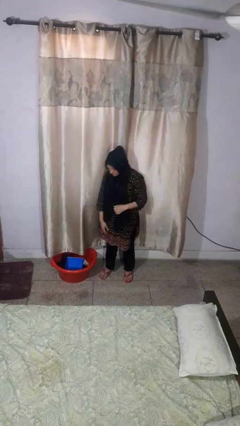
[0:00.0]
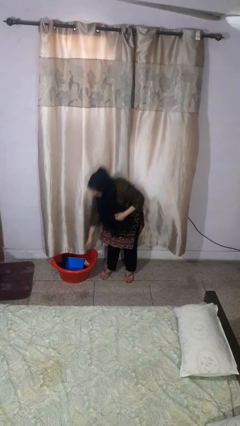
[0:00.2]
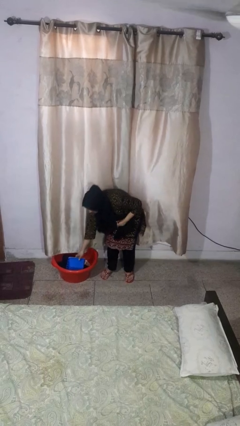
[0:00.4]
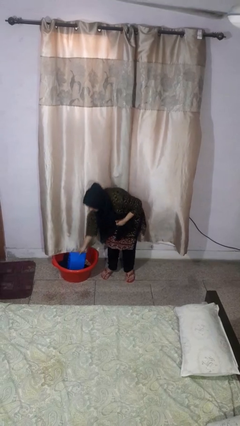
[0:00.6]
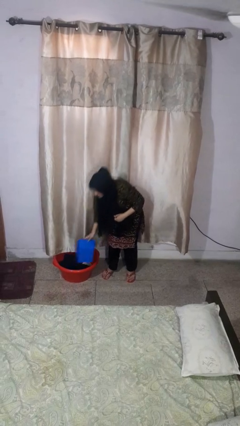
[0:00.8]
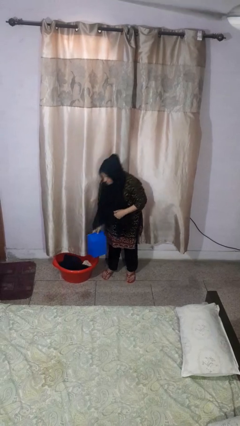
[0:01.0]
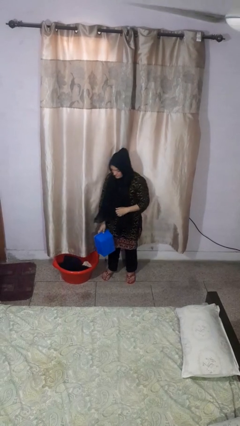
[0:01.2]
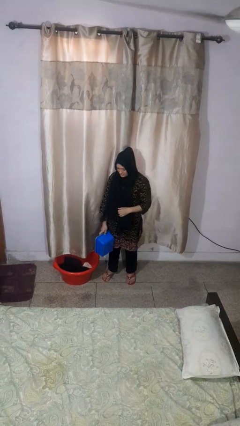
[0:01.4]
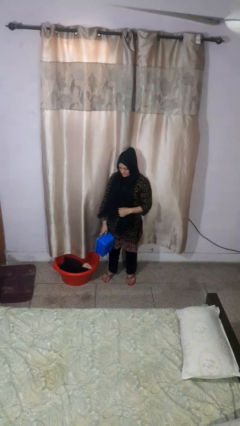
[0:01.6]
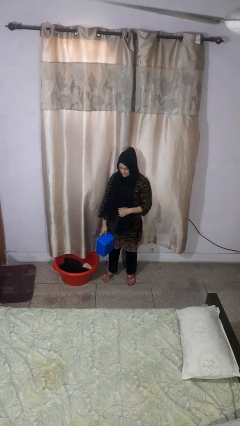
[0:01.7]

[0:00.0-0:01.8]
person takes object from basket

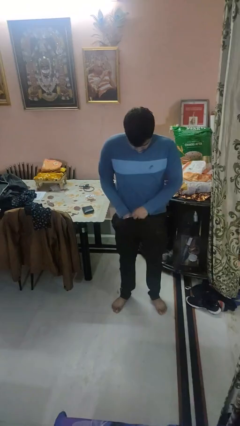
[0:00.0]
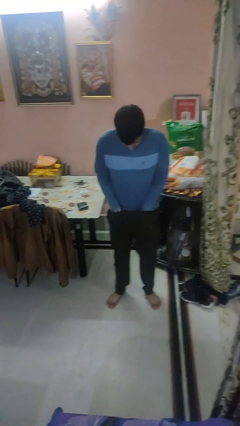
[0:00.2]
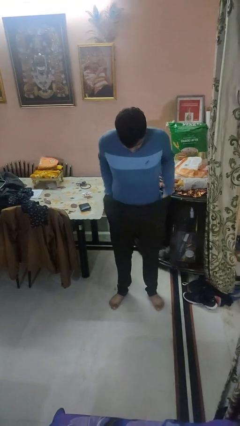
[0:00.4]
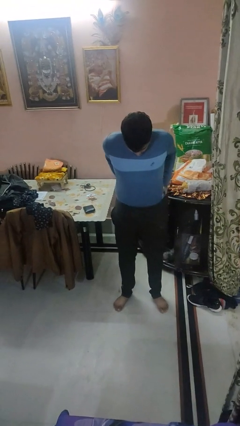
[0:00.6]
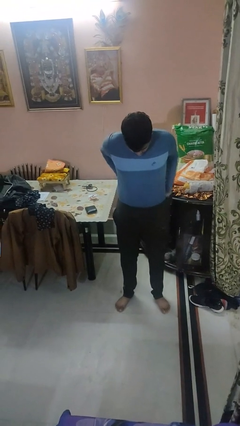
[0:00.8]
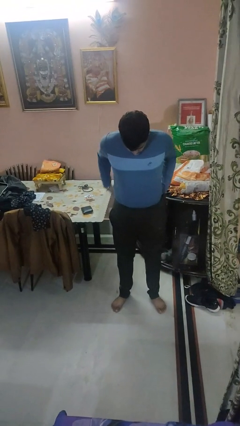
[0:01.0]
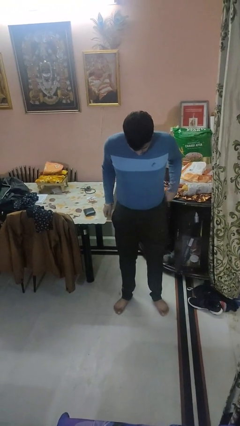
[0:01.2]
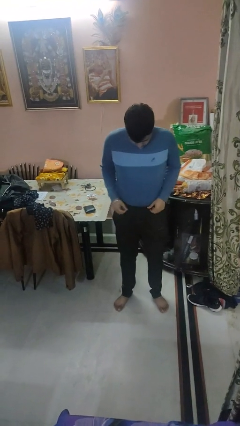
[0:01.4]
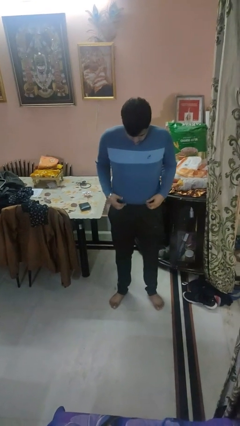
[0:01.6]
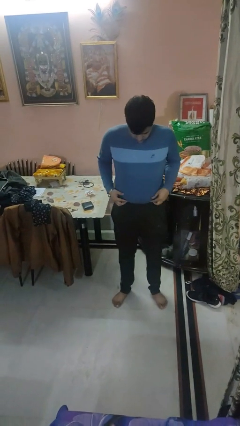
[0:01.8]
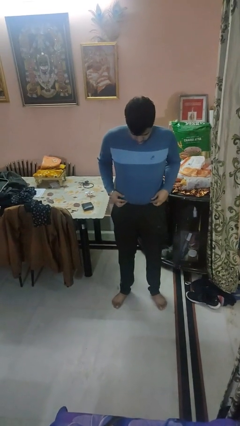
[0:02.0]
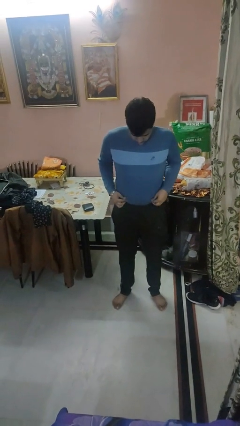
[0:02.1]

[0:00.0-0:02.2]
person tucks in shirt

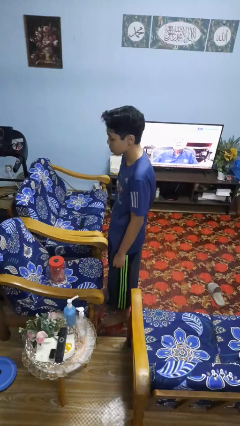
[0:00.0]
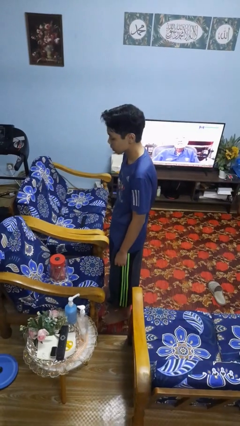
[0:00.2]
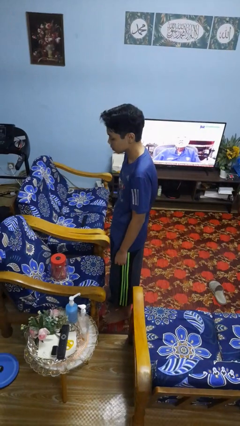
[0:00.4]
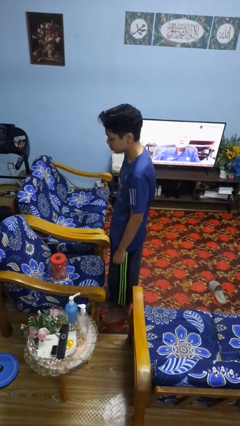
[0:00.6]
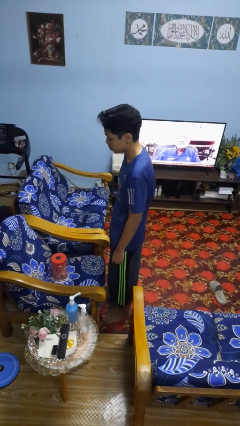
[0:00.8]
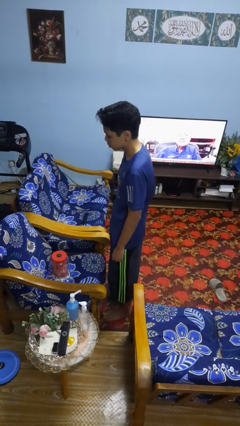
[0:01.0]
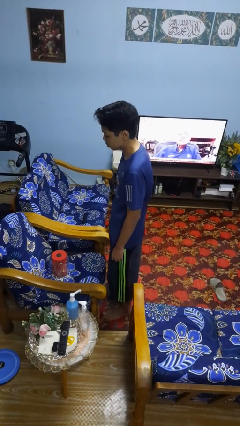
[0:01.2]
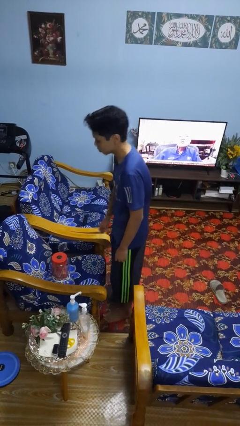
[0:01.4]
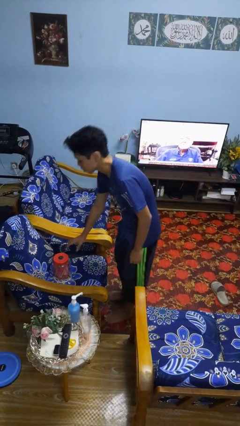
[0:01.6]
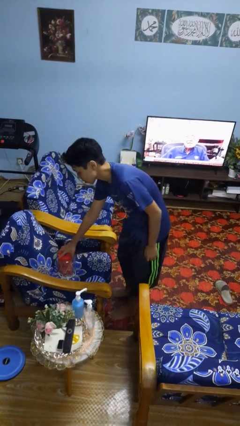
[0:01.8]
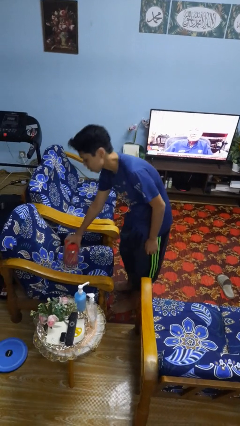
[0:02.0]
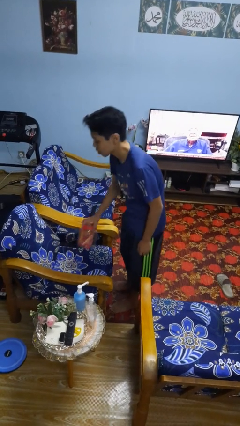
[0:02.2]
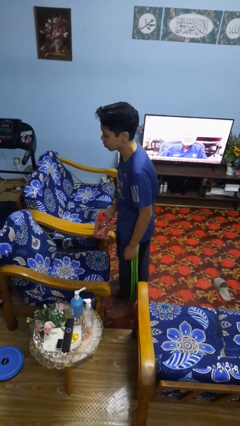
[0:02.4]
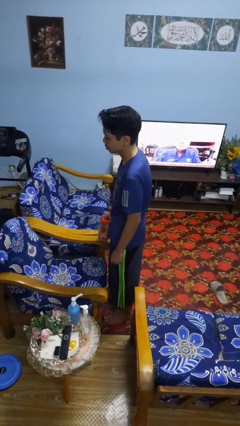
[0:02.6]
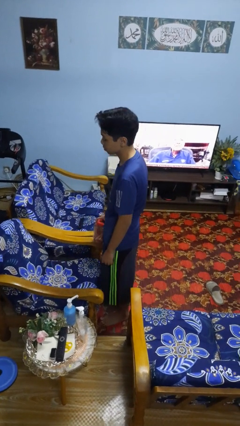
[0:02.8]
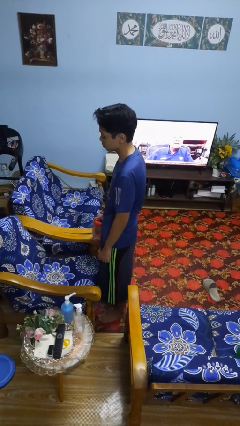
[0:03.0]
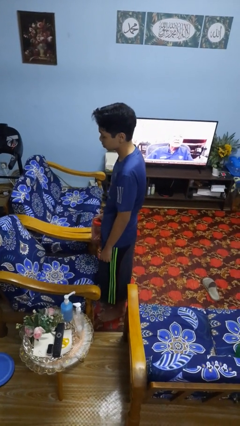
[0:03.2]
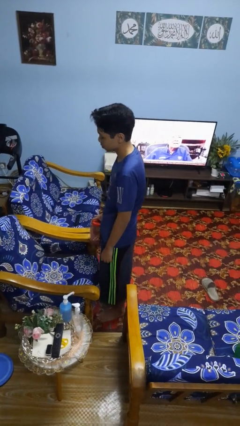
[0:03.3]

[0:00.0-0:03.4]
person picks up object from couch

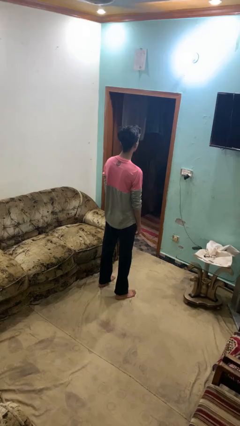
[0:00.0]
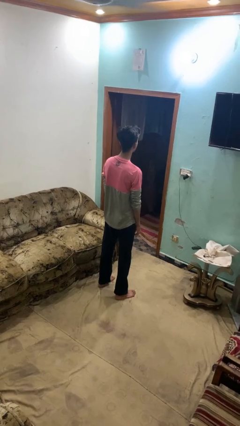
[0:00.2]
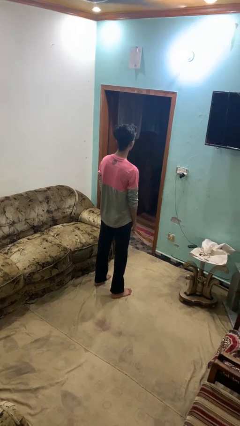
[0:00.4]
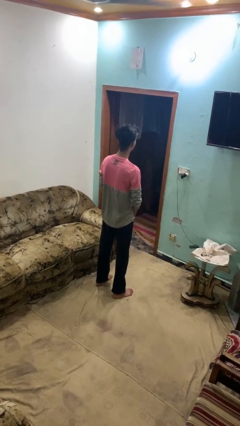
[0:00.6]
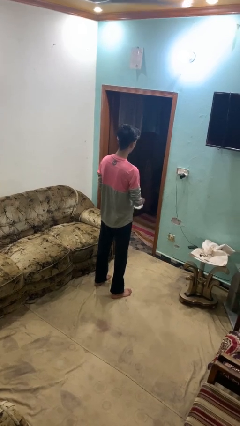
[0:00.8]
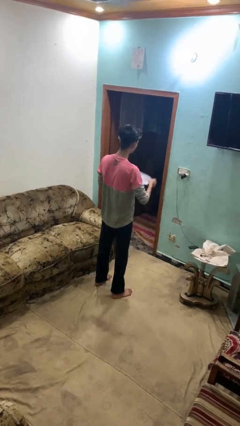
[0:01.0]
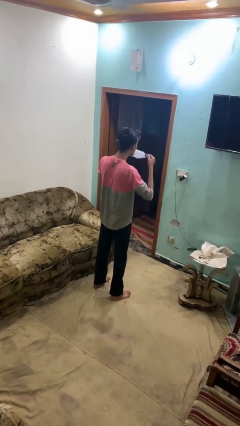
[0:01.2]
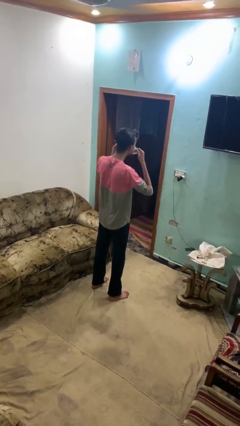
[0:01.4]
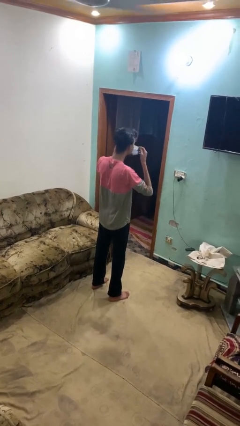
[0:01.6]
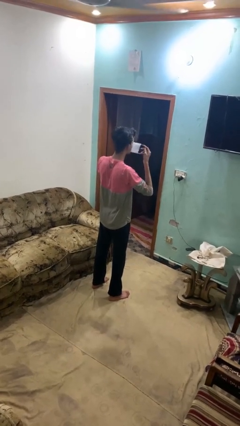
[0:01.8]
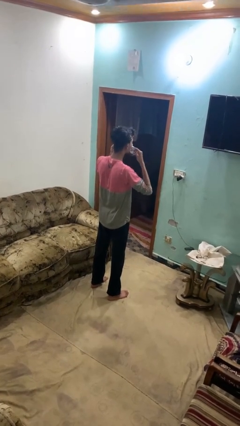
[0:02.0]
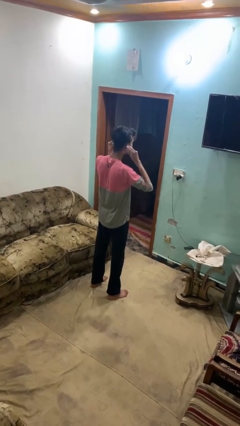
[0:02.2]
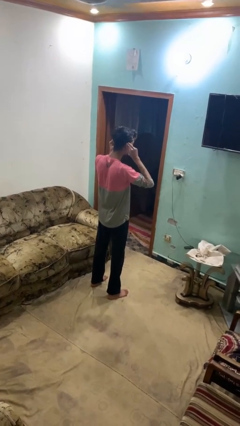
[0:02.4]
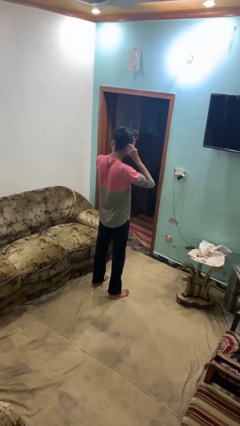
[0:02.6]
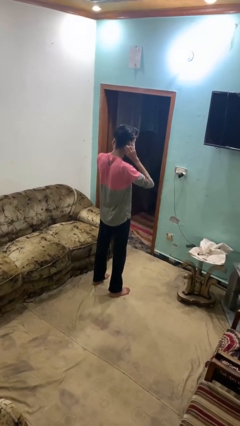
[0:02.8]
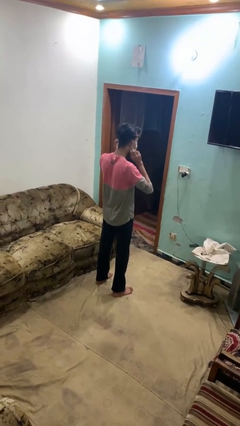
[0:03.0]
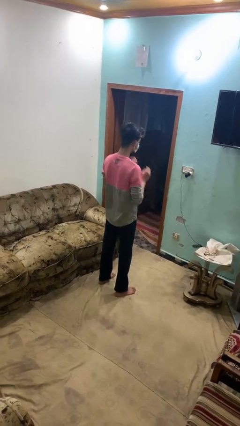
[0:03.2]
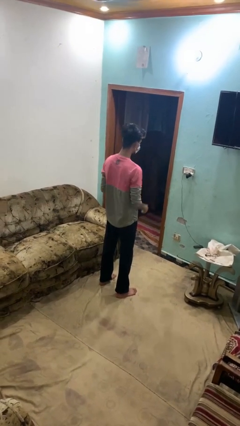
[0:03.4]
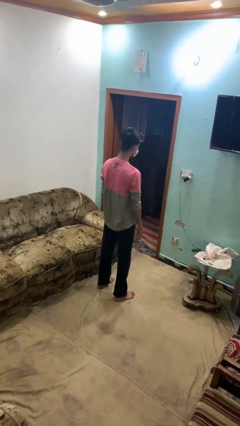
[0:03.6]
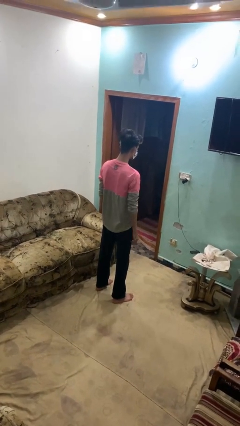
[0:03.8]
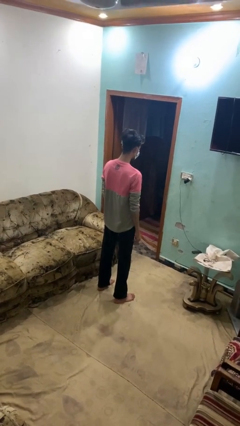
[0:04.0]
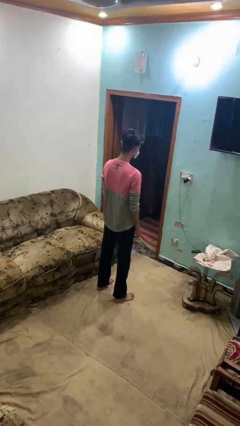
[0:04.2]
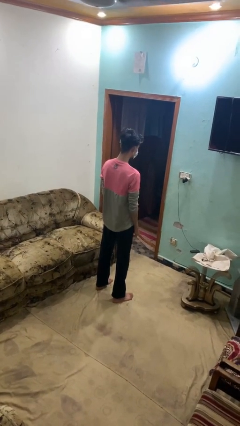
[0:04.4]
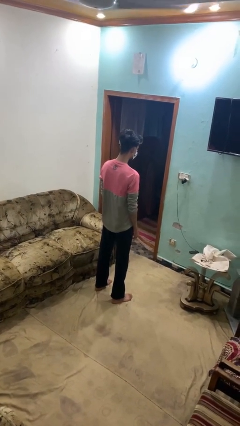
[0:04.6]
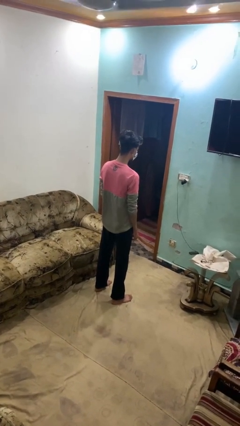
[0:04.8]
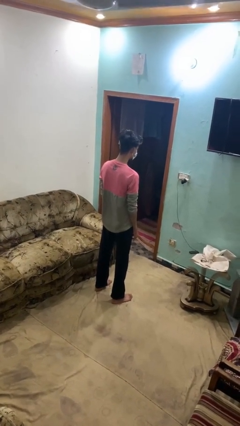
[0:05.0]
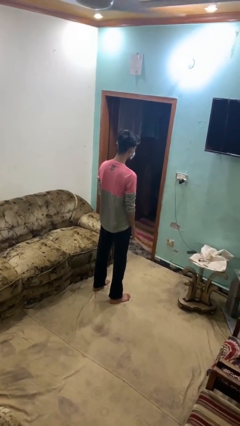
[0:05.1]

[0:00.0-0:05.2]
person puts on facemask

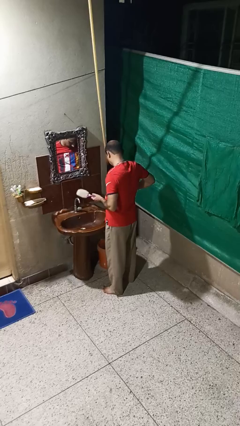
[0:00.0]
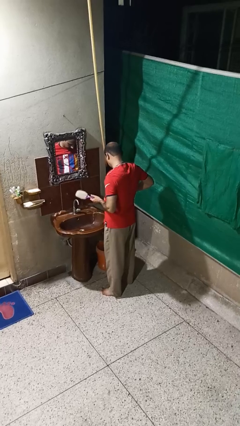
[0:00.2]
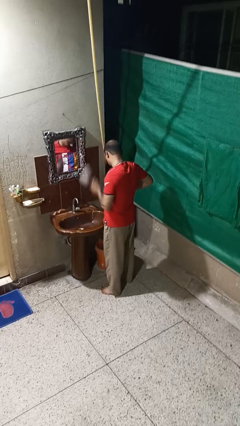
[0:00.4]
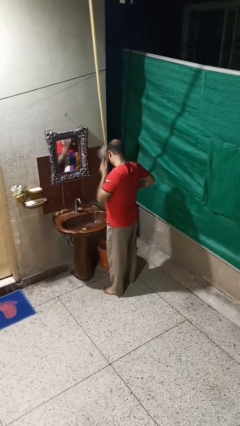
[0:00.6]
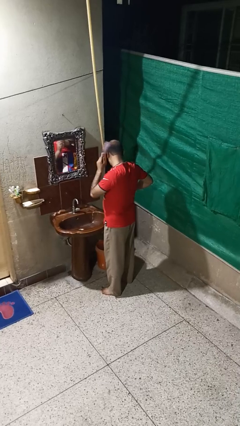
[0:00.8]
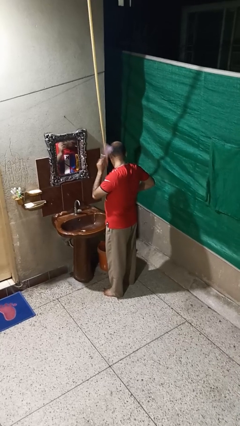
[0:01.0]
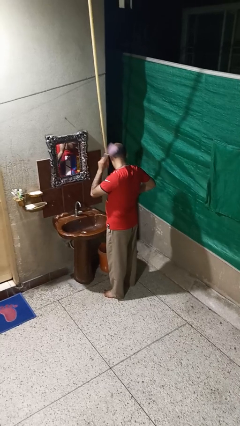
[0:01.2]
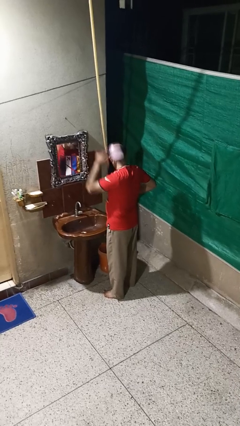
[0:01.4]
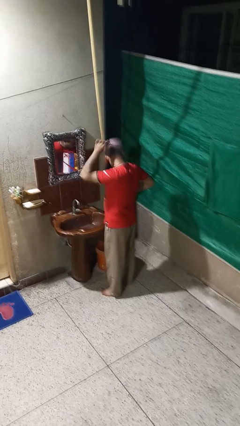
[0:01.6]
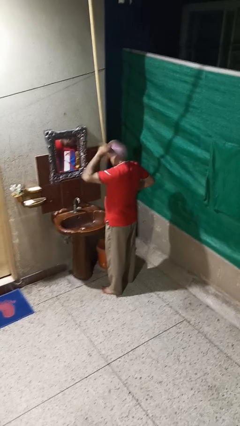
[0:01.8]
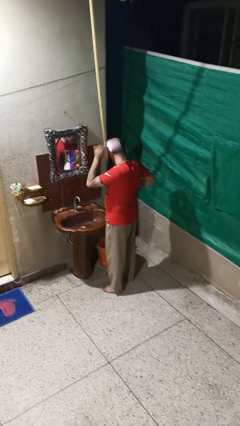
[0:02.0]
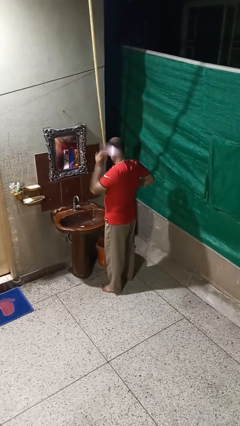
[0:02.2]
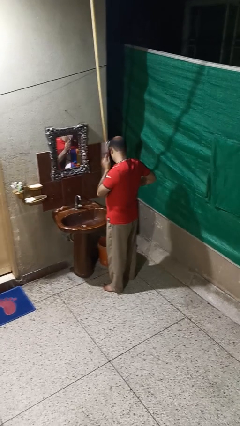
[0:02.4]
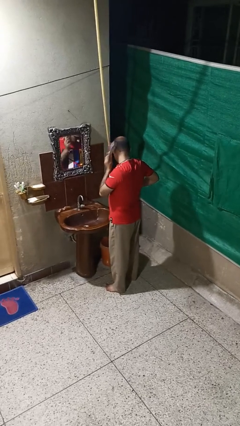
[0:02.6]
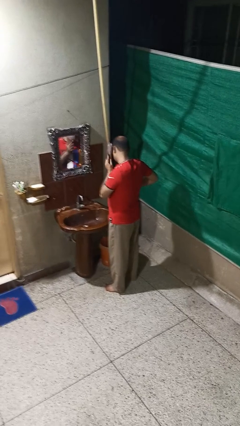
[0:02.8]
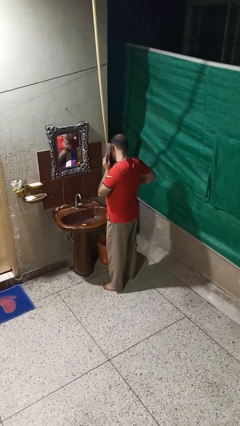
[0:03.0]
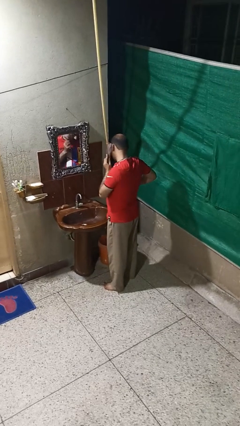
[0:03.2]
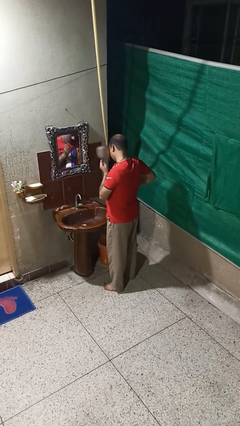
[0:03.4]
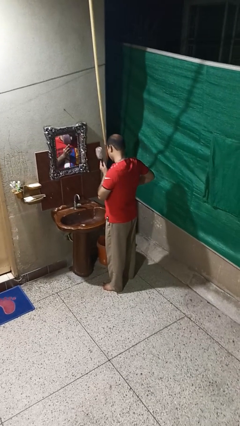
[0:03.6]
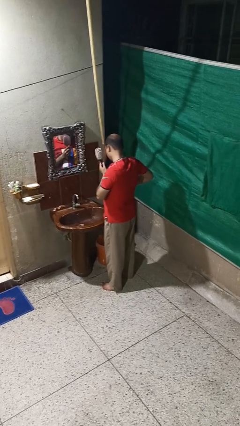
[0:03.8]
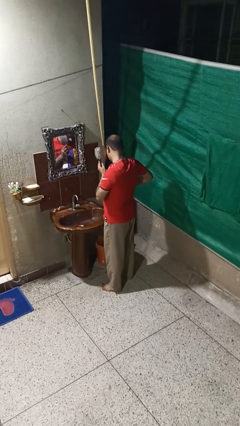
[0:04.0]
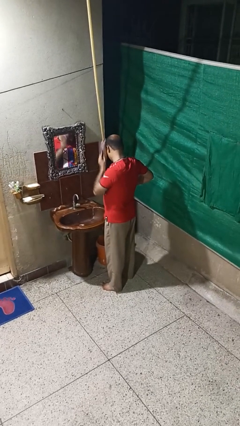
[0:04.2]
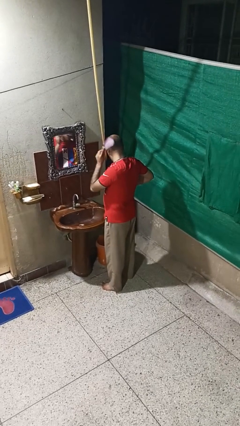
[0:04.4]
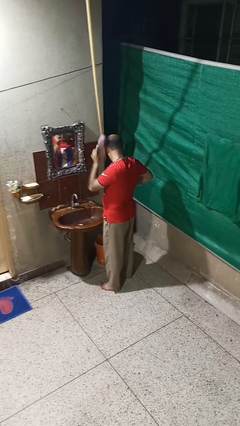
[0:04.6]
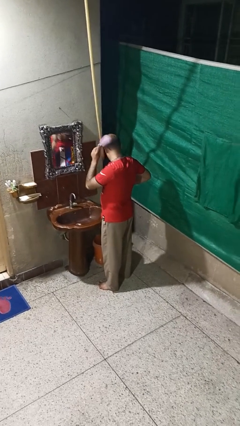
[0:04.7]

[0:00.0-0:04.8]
person brushes hair

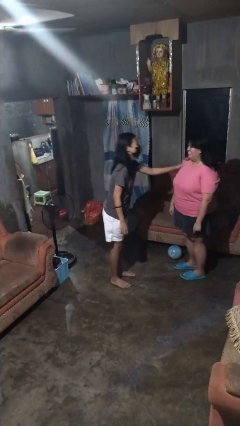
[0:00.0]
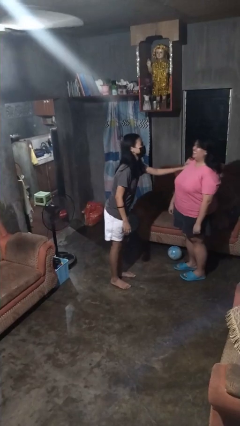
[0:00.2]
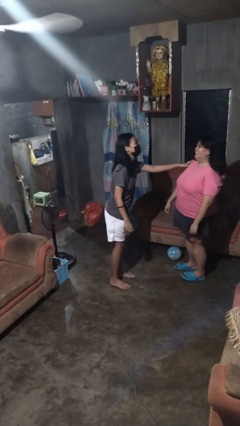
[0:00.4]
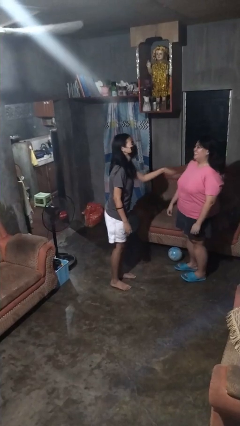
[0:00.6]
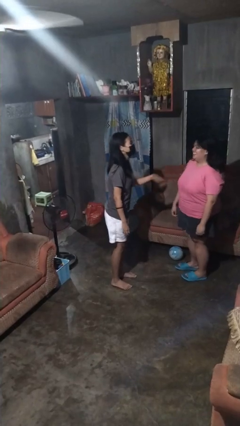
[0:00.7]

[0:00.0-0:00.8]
person shoves person
